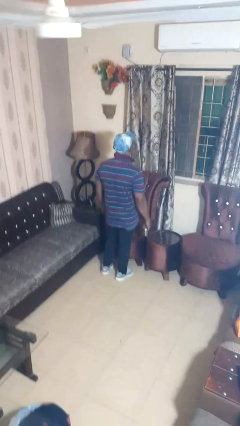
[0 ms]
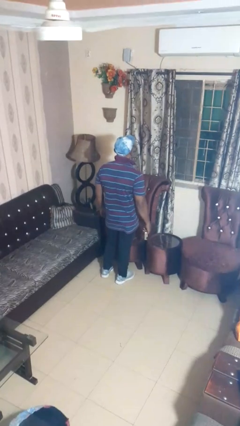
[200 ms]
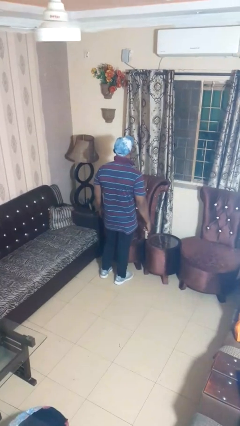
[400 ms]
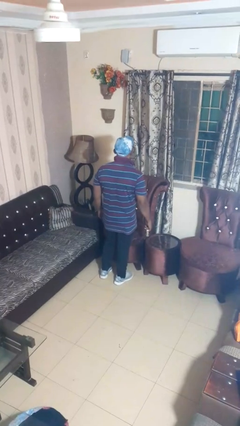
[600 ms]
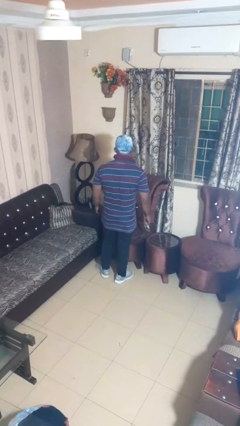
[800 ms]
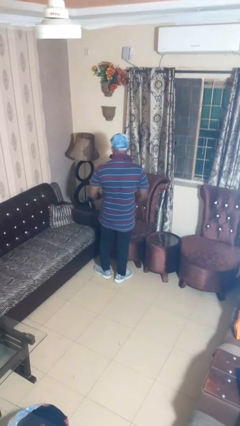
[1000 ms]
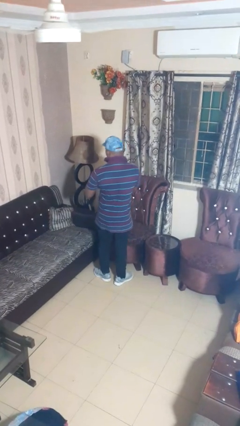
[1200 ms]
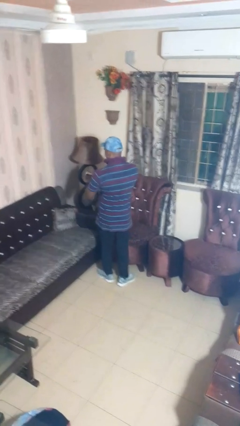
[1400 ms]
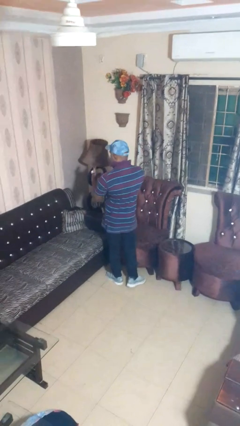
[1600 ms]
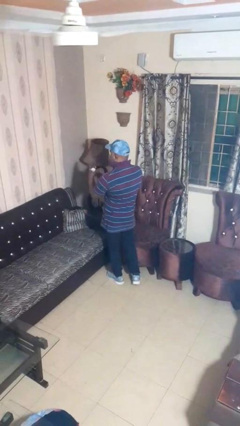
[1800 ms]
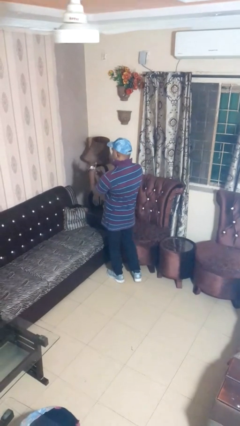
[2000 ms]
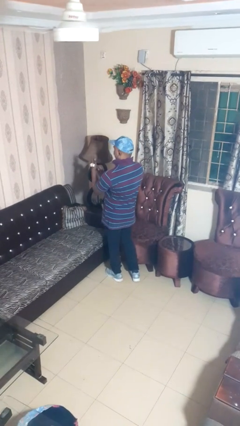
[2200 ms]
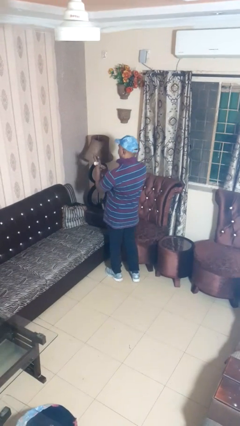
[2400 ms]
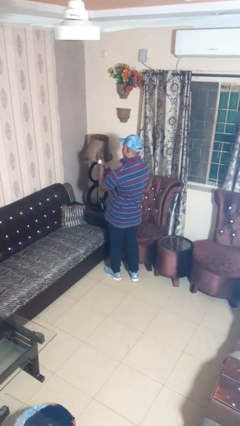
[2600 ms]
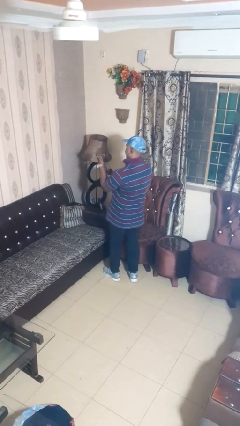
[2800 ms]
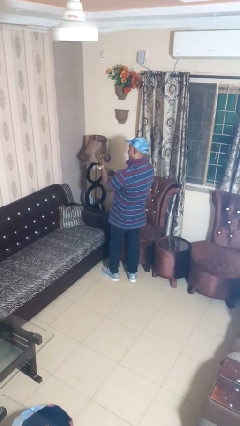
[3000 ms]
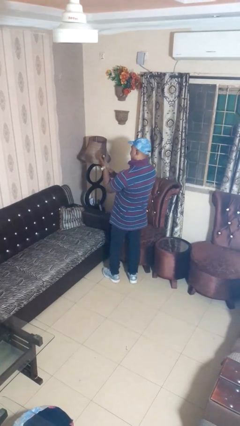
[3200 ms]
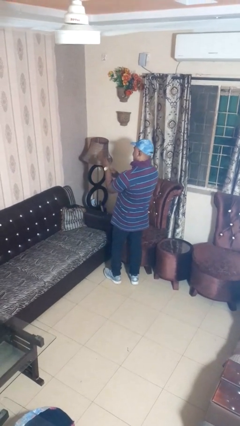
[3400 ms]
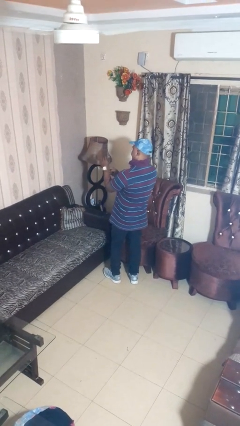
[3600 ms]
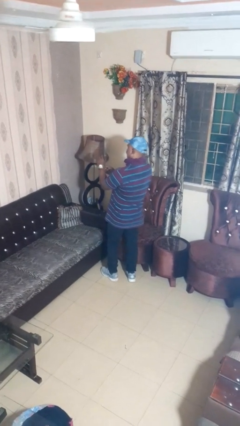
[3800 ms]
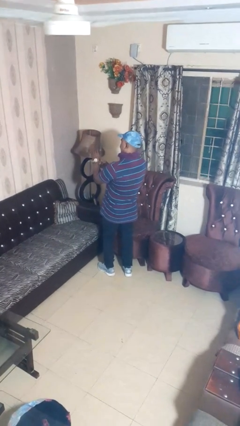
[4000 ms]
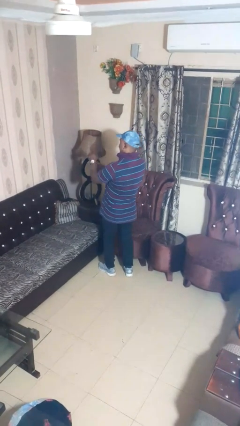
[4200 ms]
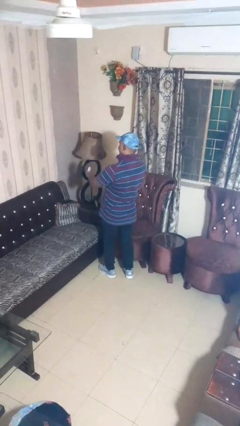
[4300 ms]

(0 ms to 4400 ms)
person puts on wristwatch

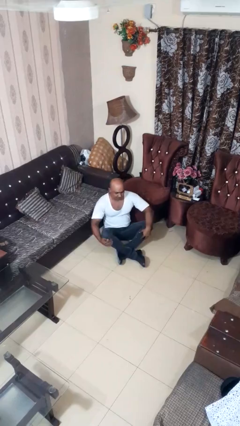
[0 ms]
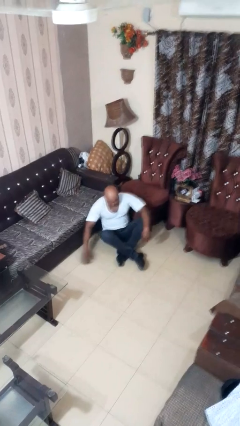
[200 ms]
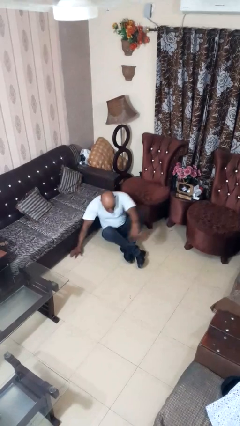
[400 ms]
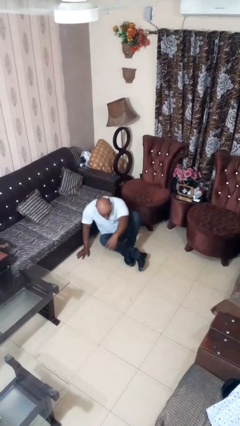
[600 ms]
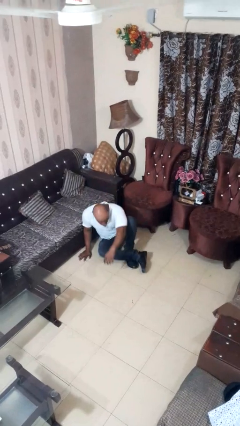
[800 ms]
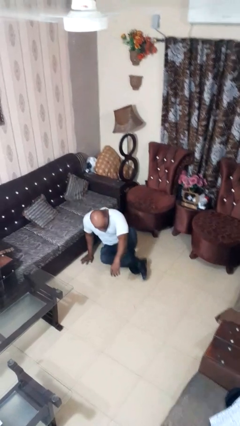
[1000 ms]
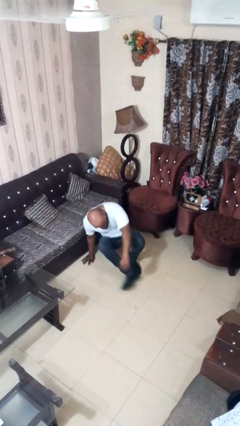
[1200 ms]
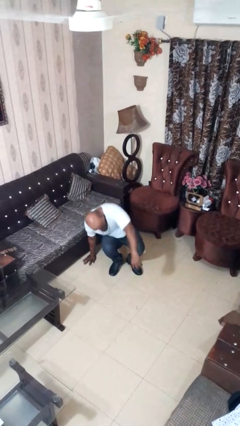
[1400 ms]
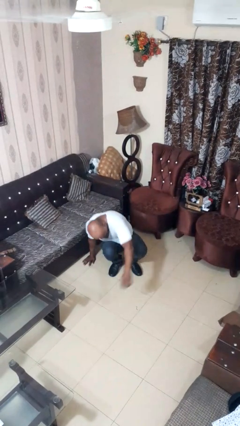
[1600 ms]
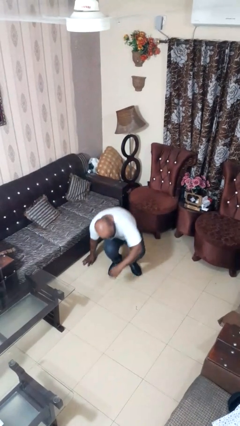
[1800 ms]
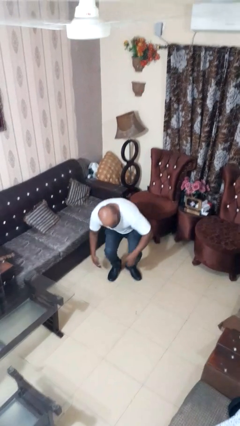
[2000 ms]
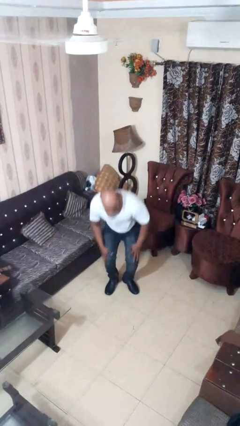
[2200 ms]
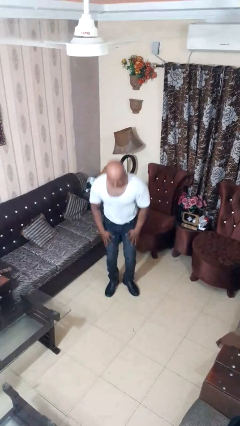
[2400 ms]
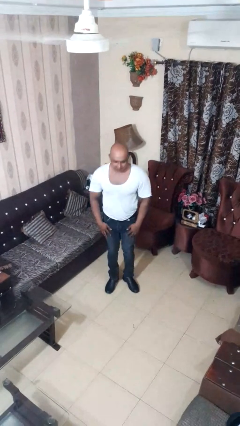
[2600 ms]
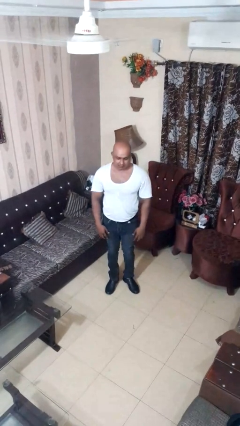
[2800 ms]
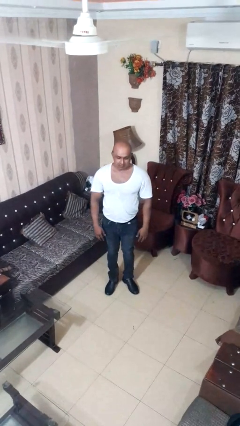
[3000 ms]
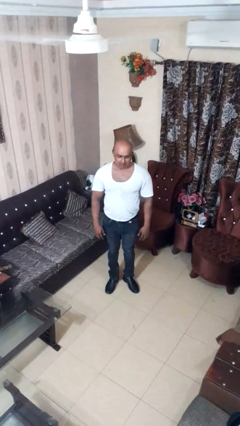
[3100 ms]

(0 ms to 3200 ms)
person stands up from floor

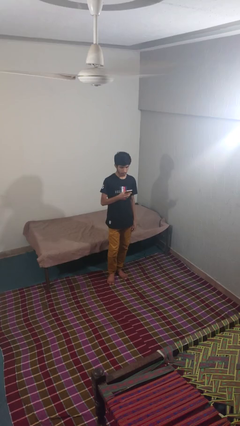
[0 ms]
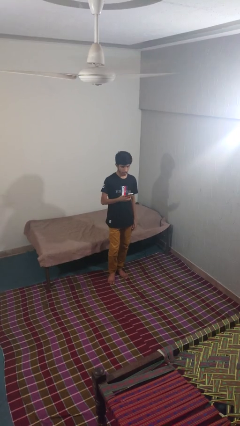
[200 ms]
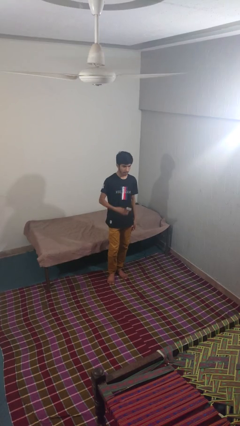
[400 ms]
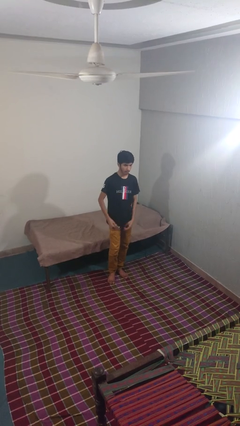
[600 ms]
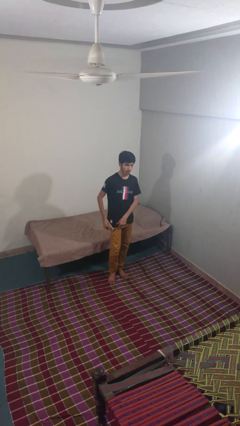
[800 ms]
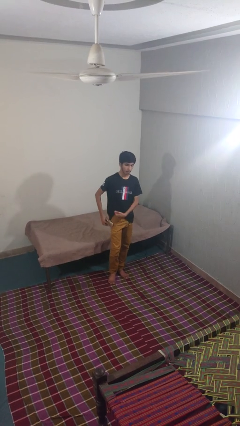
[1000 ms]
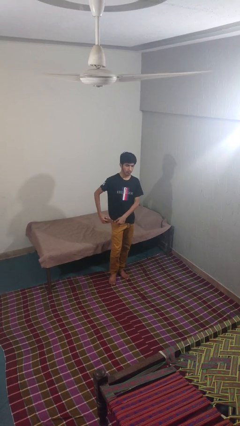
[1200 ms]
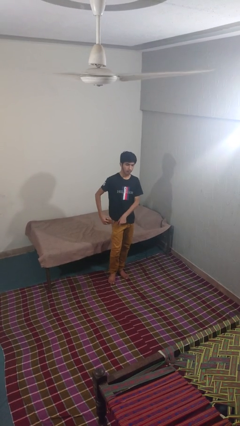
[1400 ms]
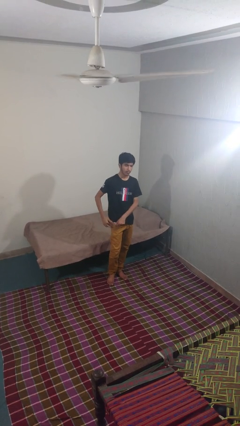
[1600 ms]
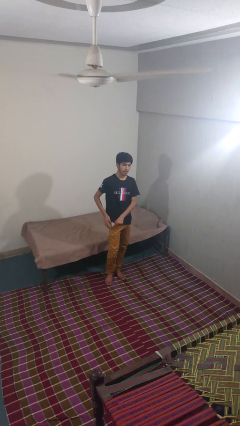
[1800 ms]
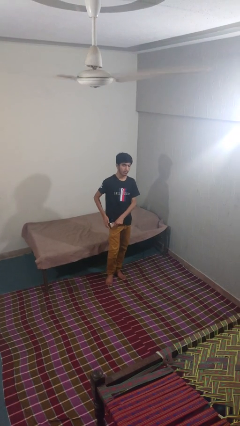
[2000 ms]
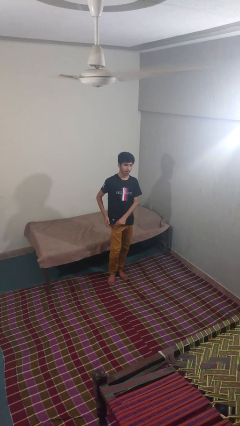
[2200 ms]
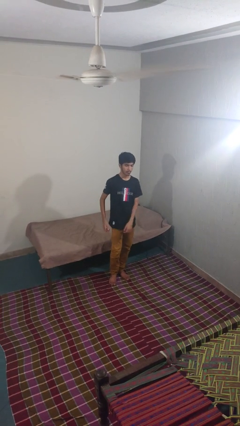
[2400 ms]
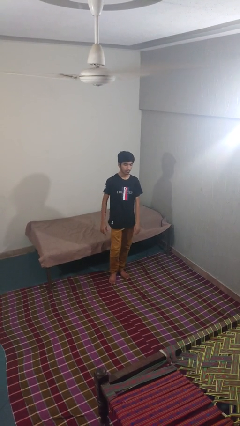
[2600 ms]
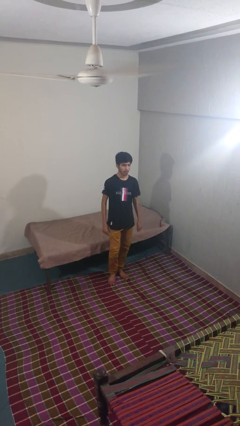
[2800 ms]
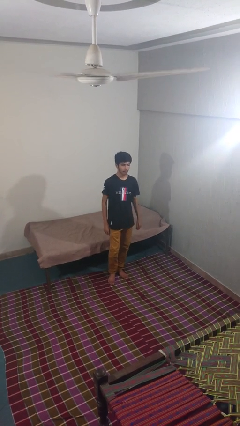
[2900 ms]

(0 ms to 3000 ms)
person puts phone into pocket

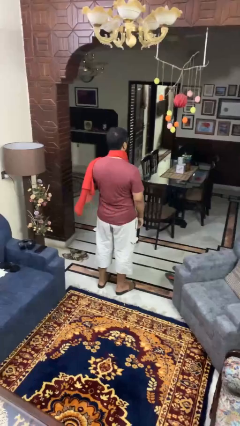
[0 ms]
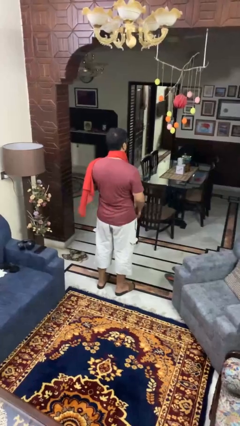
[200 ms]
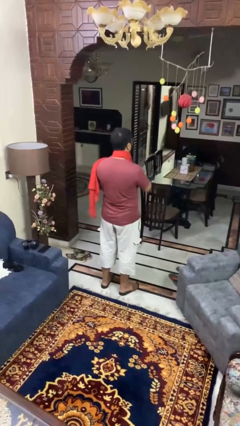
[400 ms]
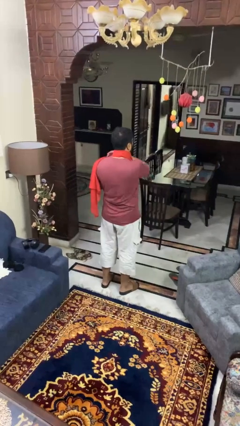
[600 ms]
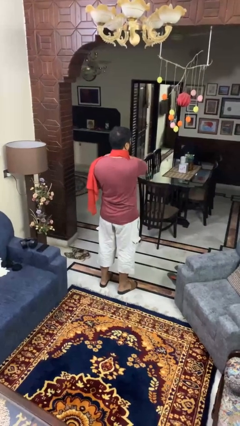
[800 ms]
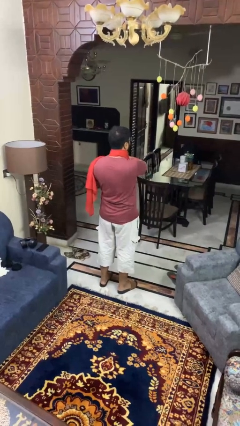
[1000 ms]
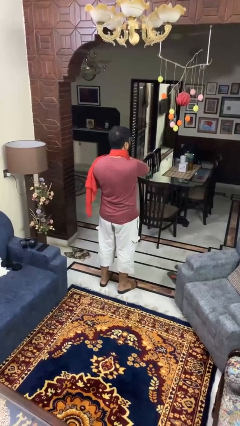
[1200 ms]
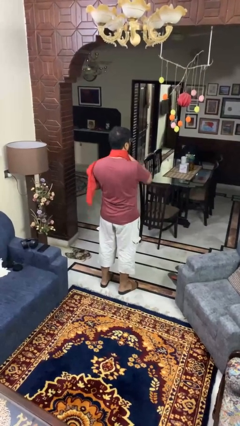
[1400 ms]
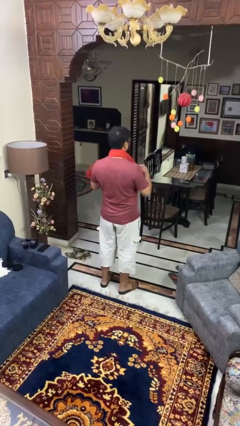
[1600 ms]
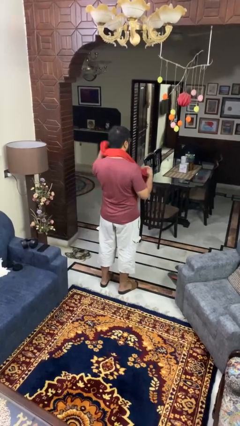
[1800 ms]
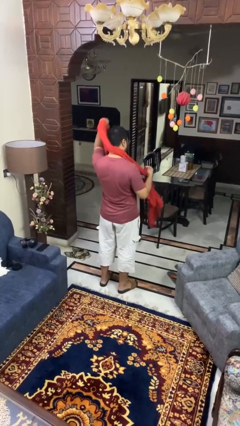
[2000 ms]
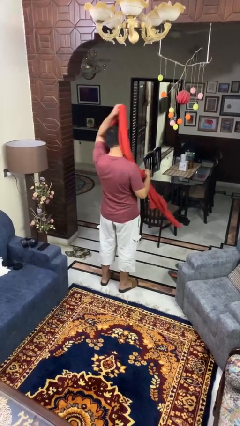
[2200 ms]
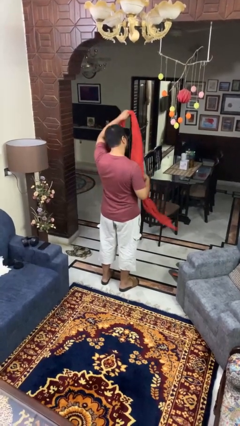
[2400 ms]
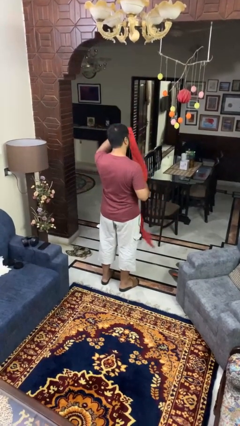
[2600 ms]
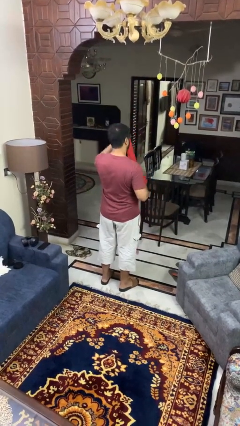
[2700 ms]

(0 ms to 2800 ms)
person takes off scarf

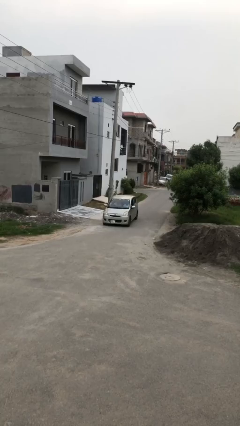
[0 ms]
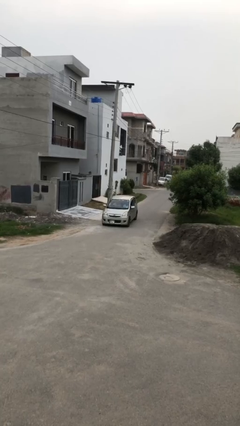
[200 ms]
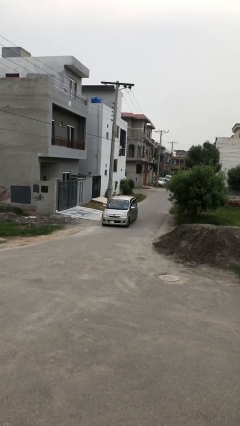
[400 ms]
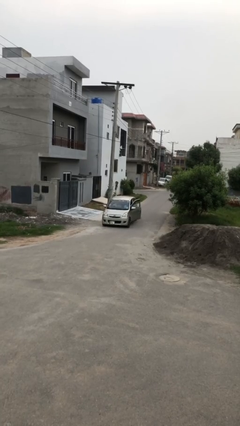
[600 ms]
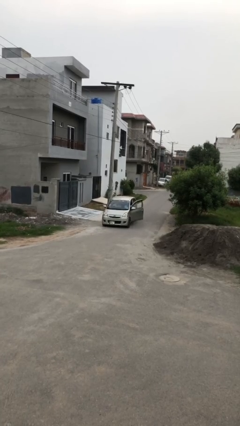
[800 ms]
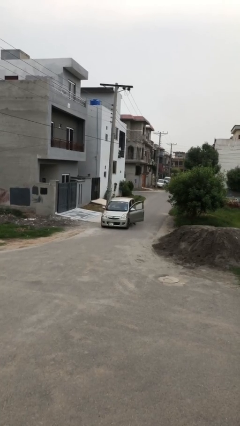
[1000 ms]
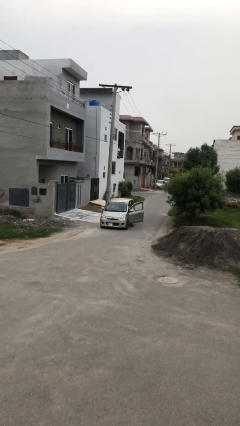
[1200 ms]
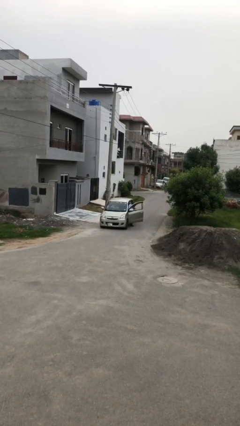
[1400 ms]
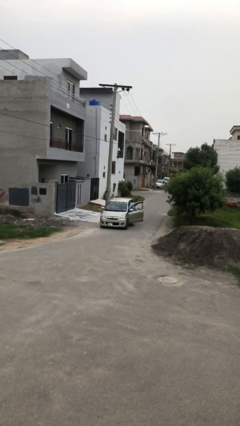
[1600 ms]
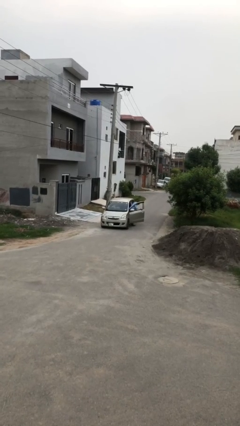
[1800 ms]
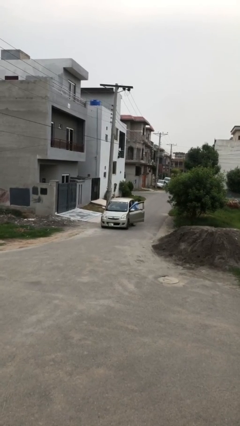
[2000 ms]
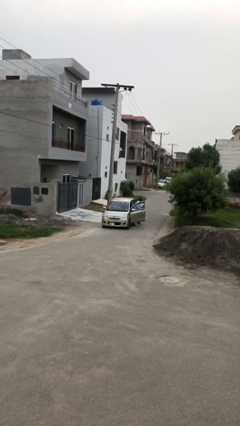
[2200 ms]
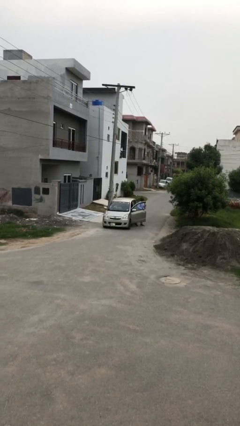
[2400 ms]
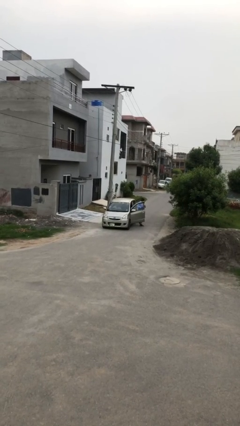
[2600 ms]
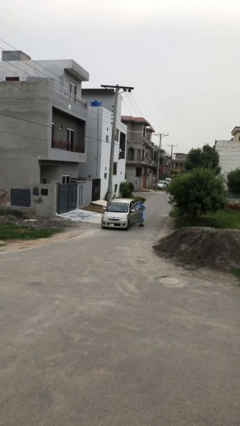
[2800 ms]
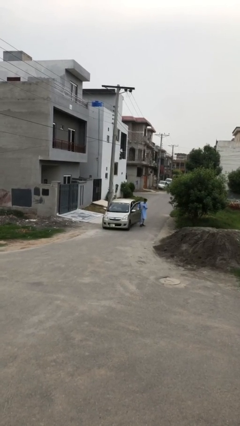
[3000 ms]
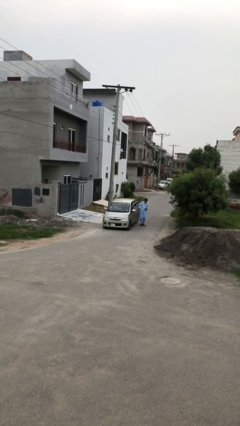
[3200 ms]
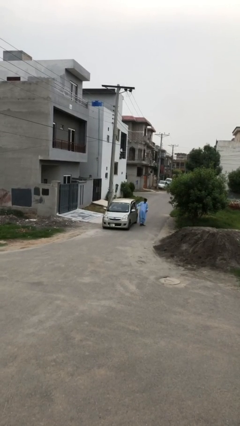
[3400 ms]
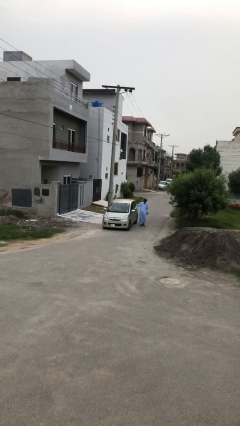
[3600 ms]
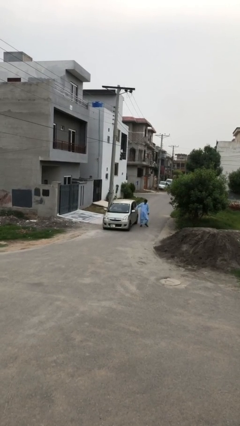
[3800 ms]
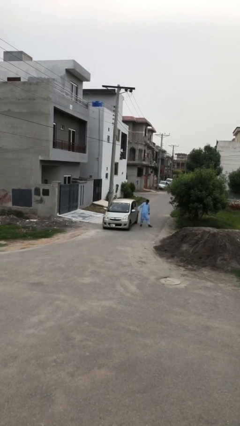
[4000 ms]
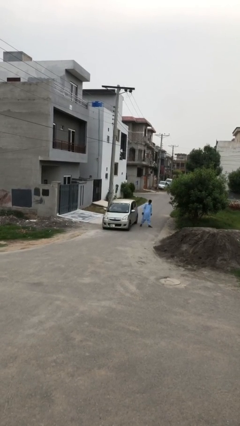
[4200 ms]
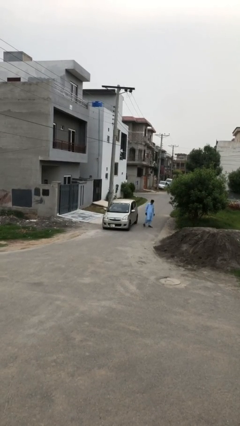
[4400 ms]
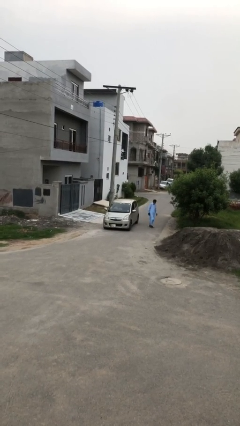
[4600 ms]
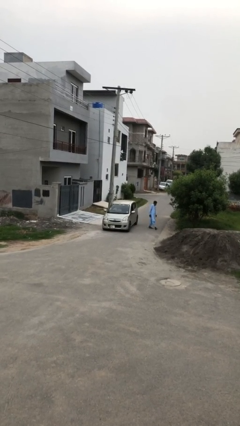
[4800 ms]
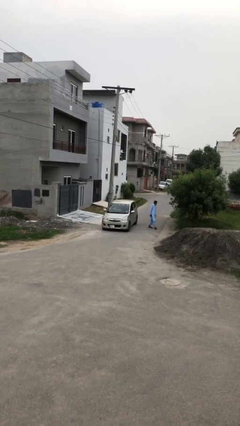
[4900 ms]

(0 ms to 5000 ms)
car drops off person
